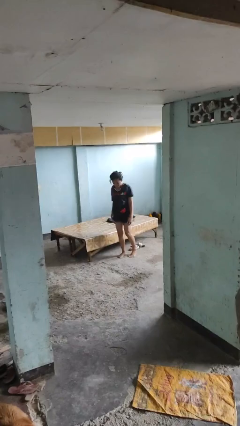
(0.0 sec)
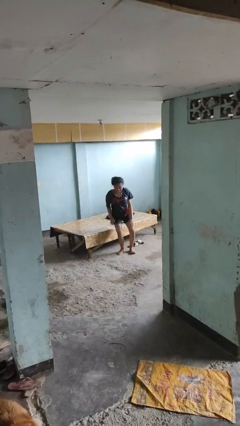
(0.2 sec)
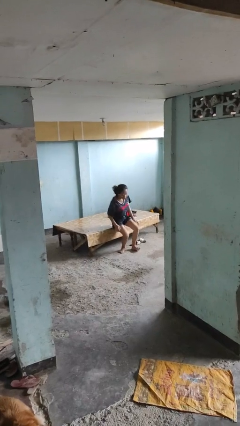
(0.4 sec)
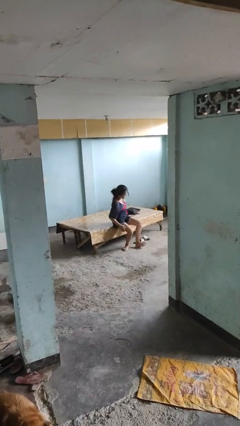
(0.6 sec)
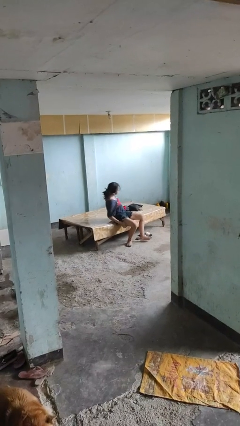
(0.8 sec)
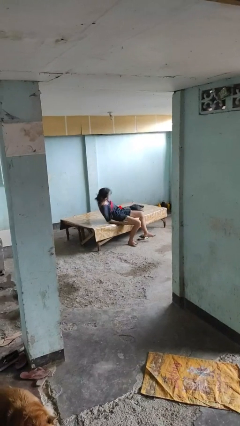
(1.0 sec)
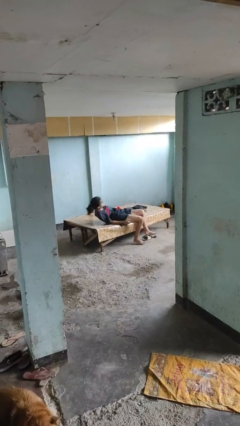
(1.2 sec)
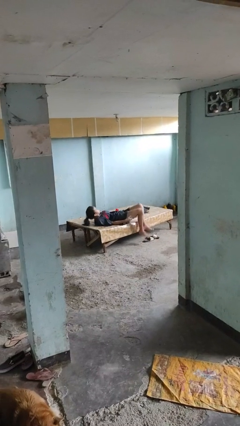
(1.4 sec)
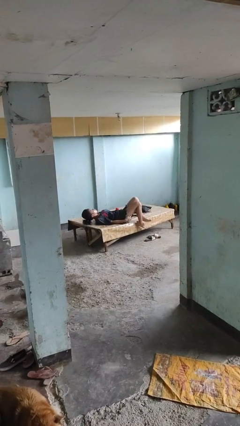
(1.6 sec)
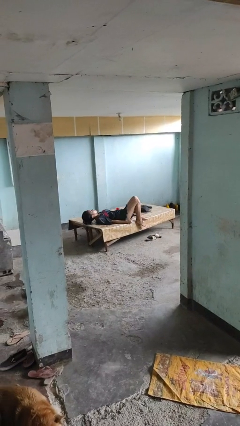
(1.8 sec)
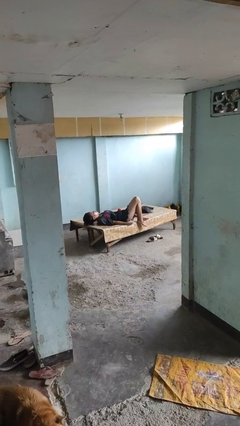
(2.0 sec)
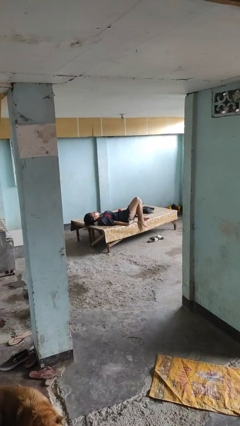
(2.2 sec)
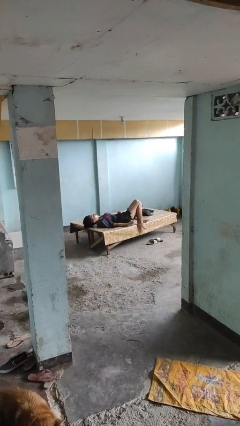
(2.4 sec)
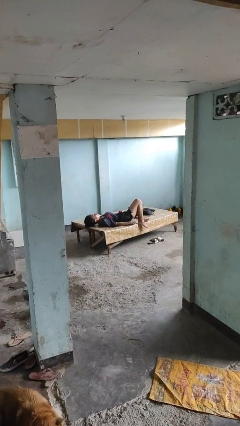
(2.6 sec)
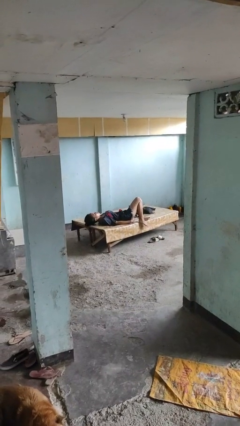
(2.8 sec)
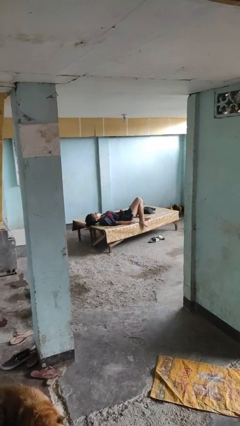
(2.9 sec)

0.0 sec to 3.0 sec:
person lies down on bed

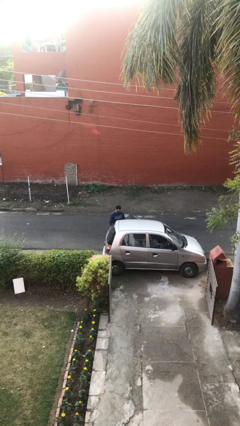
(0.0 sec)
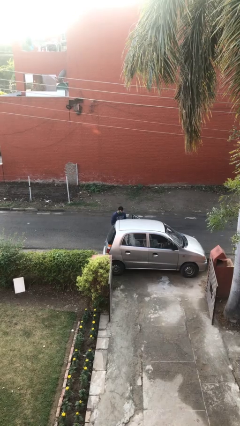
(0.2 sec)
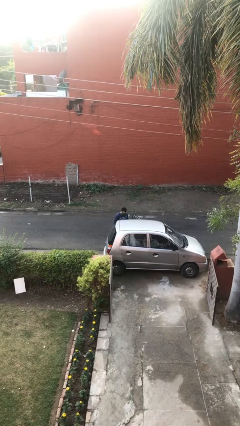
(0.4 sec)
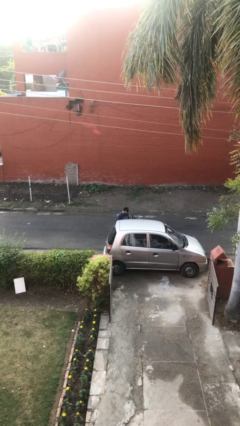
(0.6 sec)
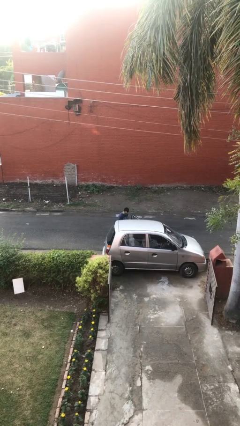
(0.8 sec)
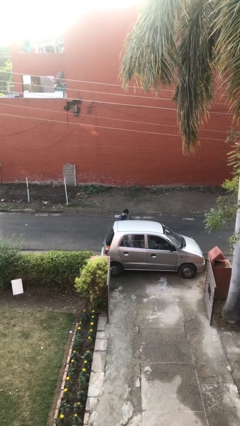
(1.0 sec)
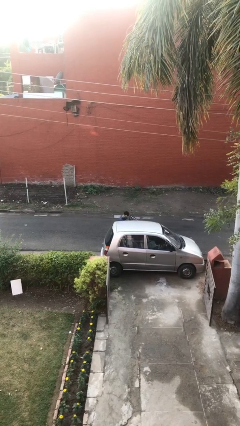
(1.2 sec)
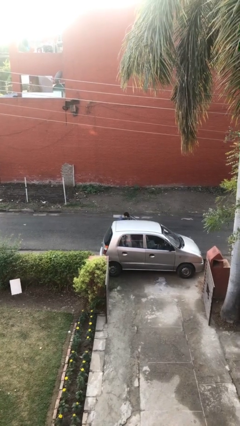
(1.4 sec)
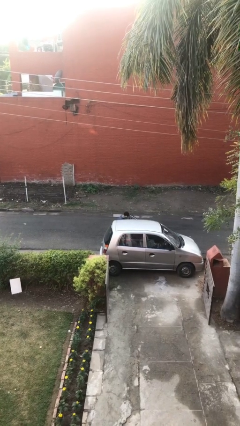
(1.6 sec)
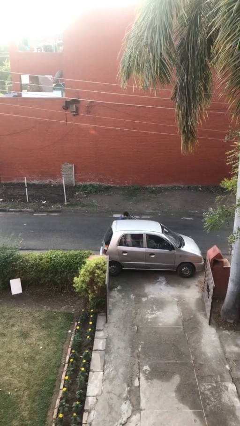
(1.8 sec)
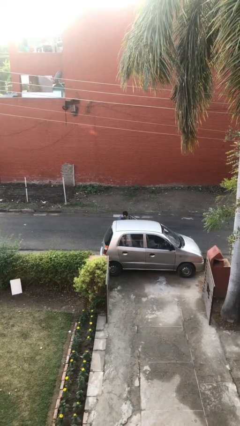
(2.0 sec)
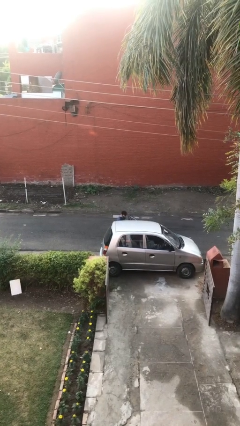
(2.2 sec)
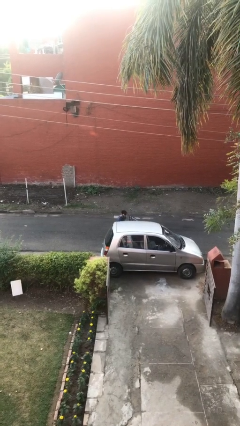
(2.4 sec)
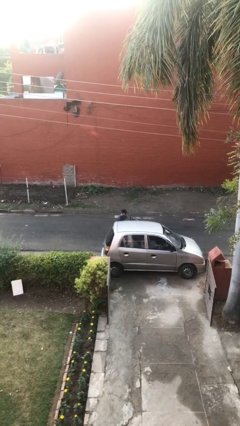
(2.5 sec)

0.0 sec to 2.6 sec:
person loads car

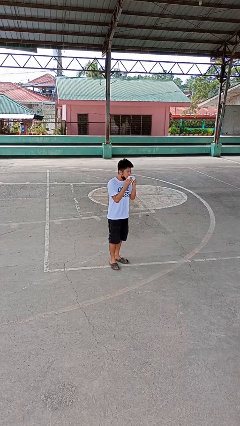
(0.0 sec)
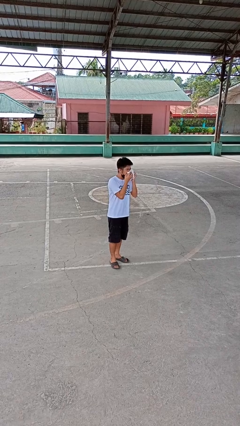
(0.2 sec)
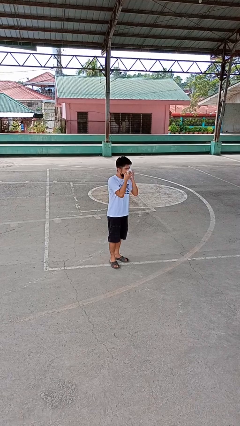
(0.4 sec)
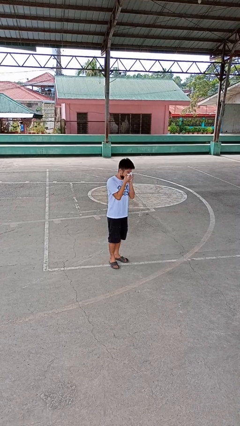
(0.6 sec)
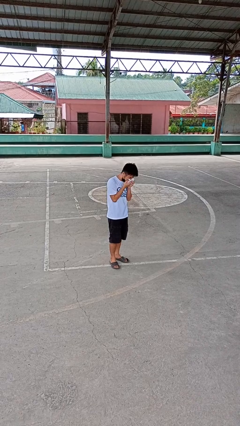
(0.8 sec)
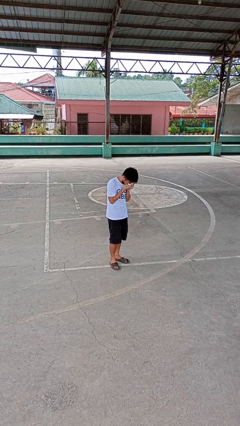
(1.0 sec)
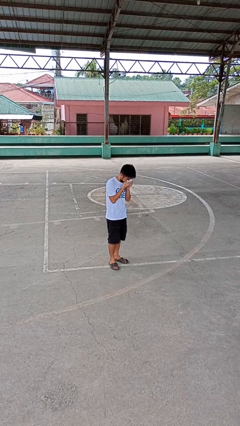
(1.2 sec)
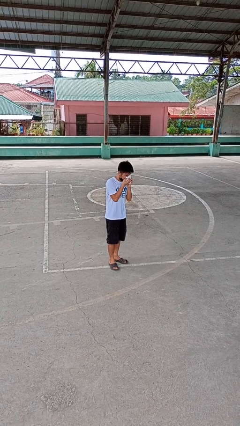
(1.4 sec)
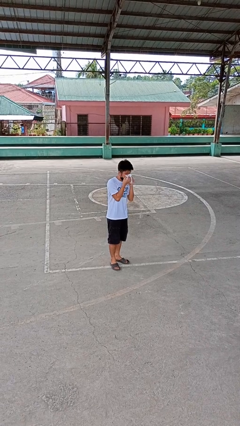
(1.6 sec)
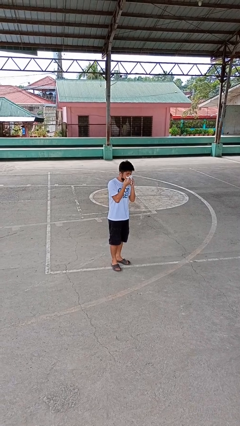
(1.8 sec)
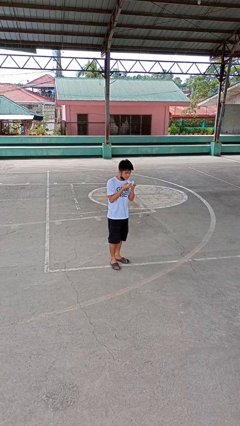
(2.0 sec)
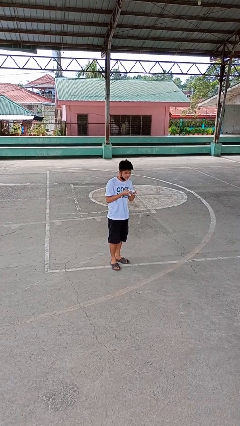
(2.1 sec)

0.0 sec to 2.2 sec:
person blows nose

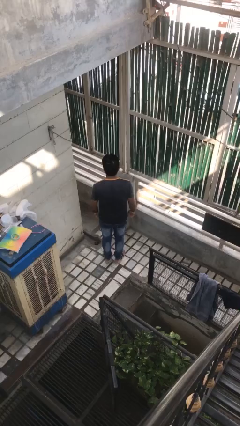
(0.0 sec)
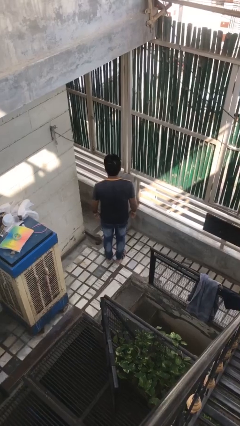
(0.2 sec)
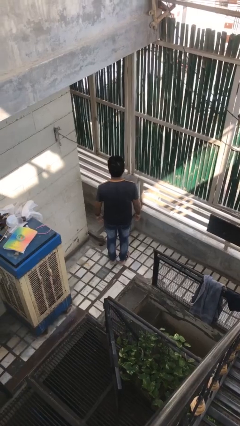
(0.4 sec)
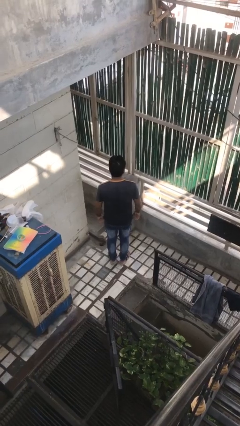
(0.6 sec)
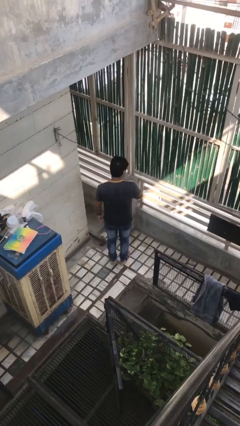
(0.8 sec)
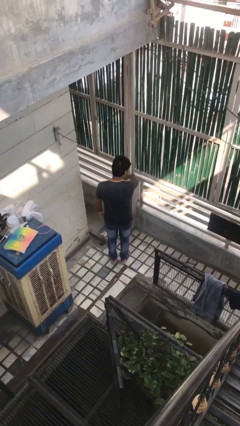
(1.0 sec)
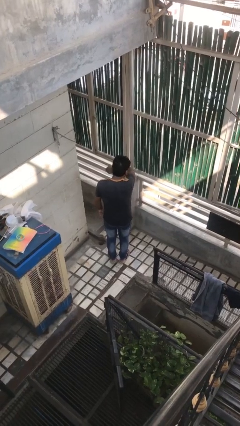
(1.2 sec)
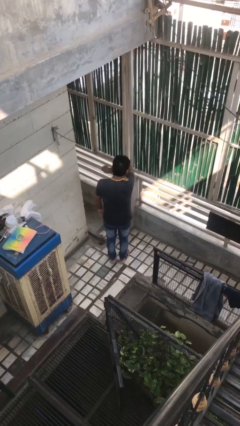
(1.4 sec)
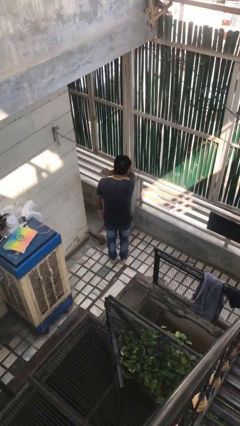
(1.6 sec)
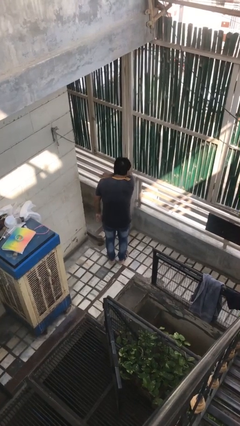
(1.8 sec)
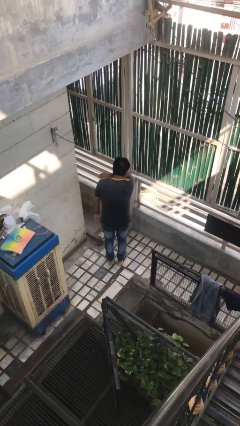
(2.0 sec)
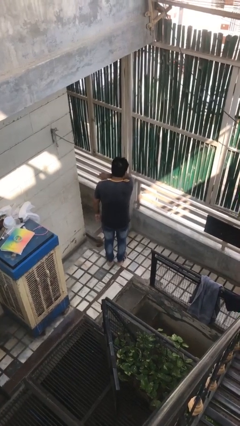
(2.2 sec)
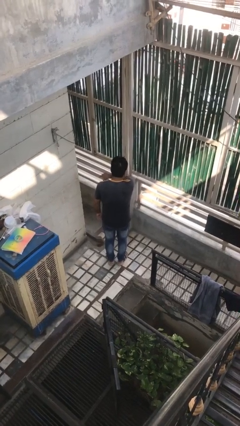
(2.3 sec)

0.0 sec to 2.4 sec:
person sneezes into arm

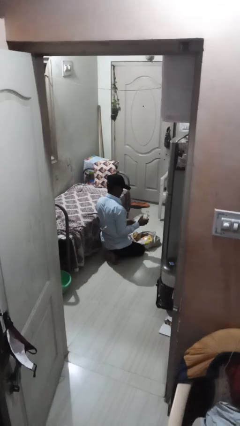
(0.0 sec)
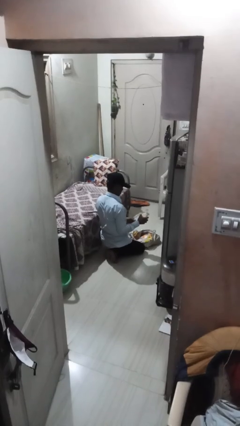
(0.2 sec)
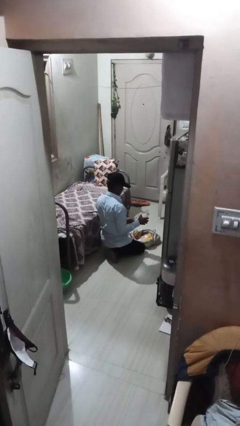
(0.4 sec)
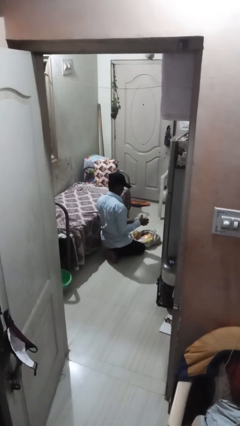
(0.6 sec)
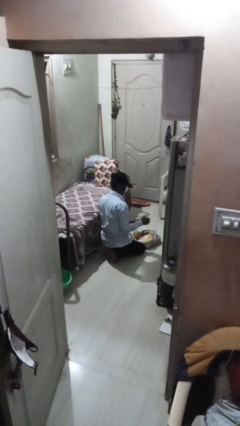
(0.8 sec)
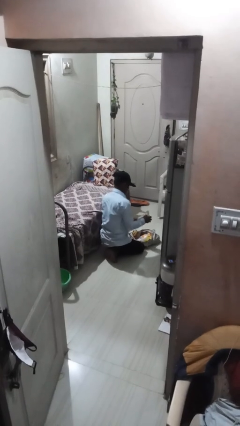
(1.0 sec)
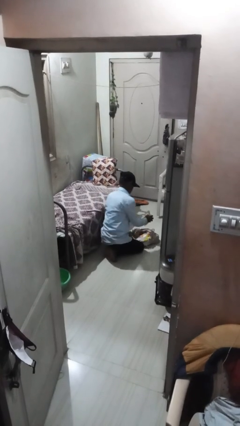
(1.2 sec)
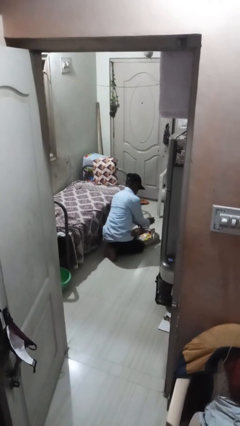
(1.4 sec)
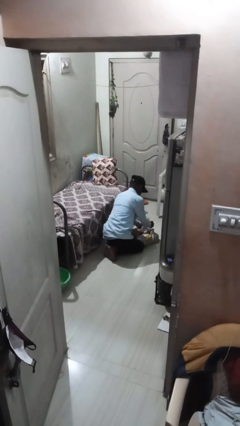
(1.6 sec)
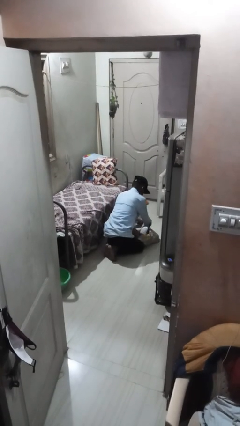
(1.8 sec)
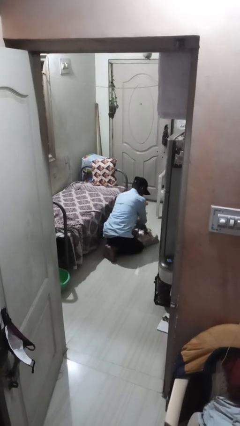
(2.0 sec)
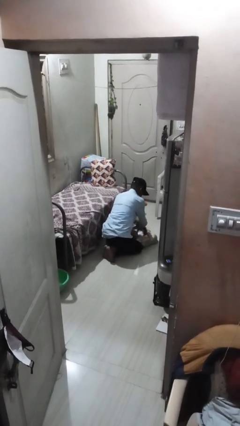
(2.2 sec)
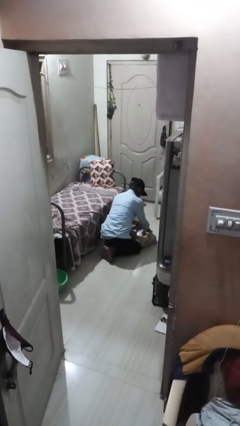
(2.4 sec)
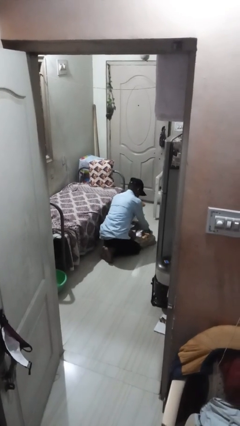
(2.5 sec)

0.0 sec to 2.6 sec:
person puts object into bag

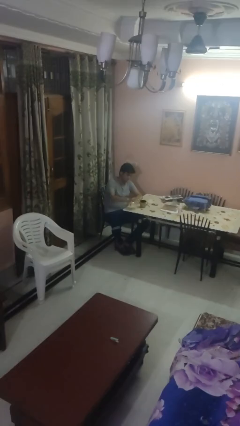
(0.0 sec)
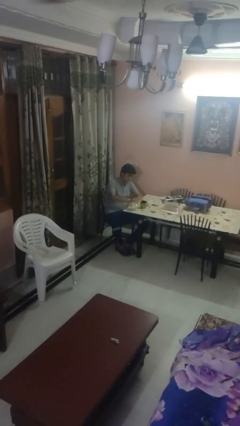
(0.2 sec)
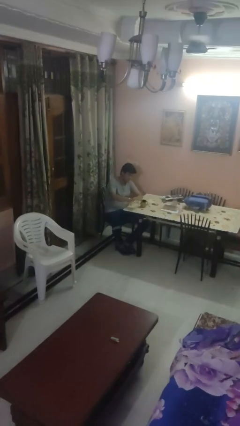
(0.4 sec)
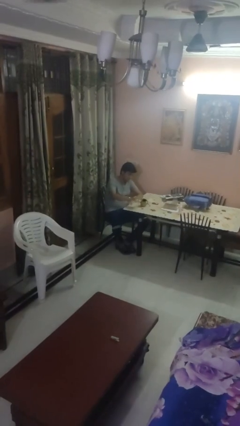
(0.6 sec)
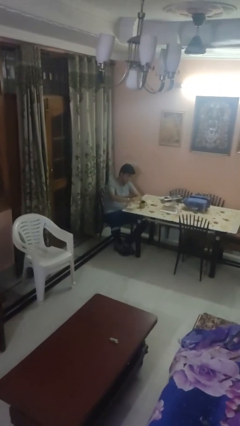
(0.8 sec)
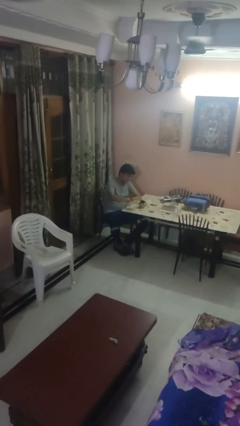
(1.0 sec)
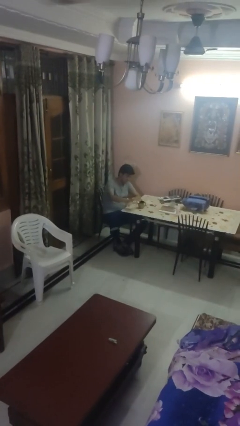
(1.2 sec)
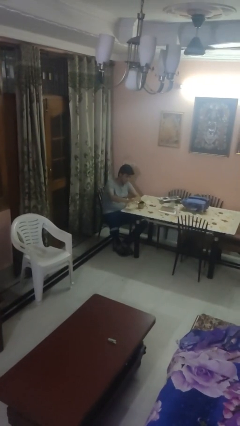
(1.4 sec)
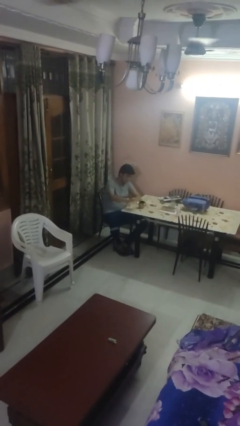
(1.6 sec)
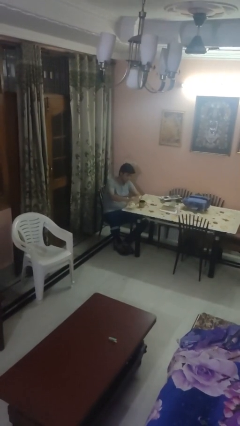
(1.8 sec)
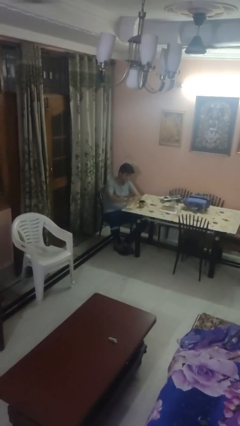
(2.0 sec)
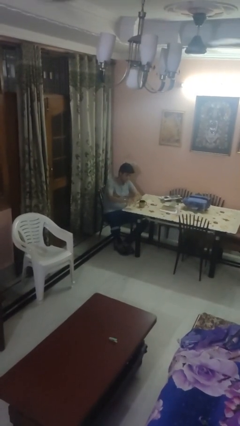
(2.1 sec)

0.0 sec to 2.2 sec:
person pours liquid into cup

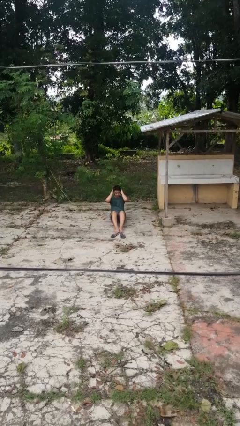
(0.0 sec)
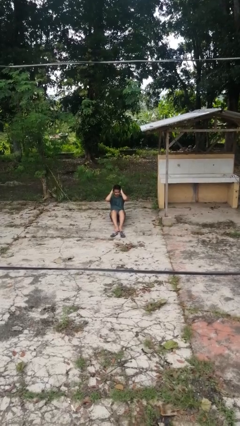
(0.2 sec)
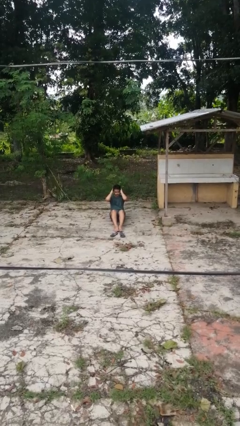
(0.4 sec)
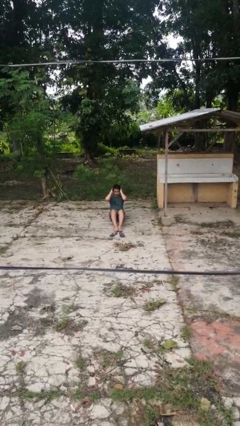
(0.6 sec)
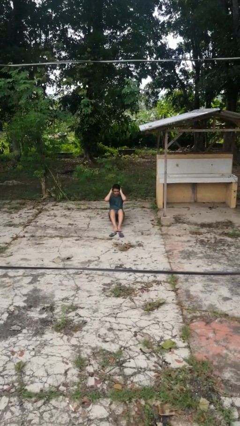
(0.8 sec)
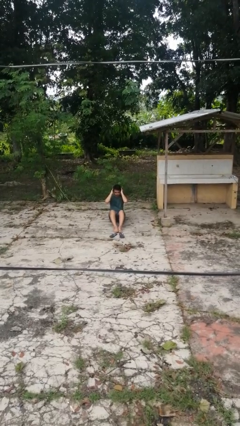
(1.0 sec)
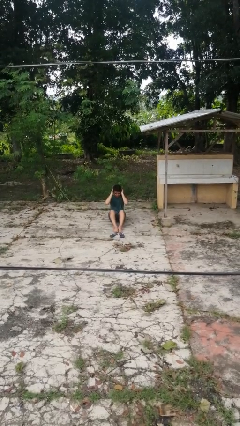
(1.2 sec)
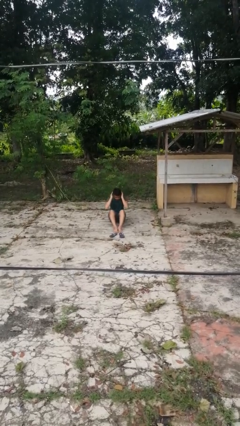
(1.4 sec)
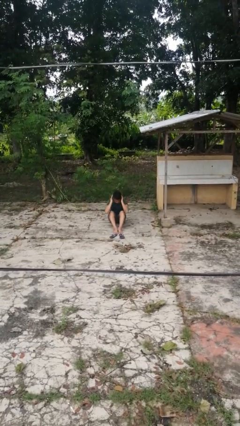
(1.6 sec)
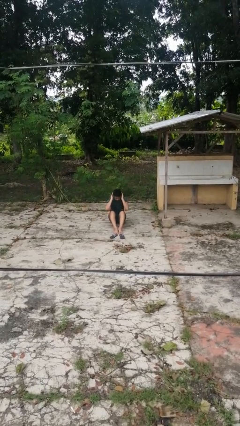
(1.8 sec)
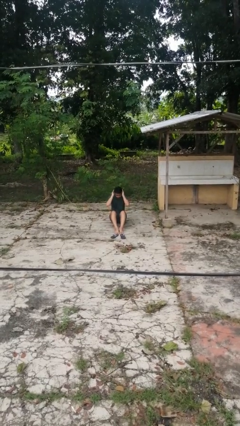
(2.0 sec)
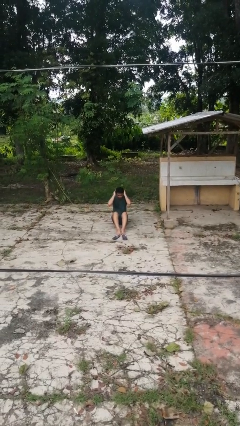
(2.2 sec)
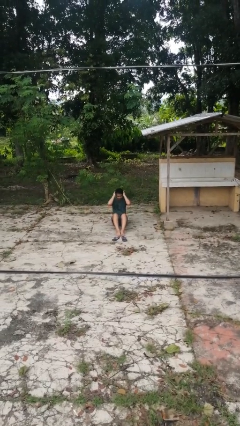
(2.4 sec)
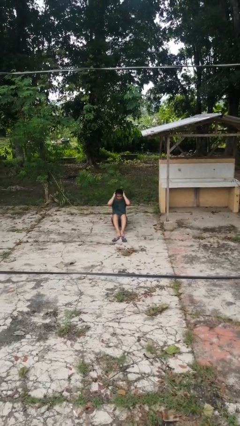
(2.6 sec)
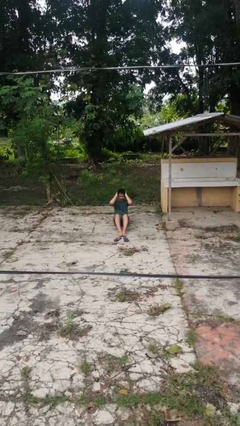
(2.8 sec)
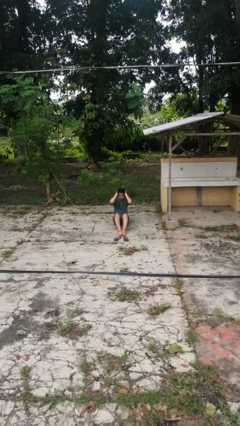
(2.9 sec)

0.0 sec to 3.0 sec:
person exercises with situp
